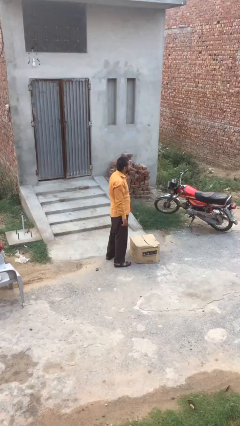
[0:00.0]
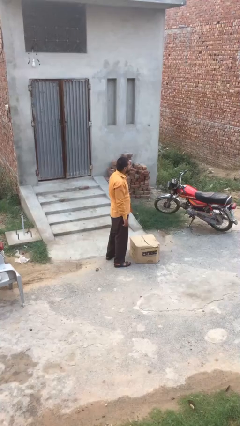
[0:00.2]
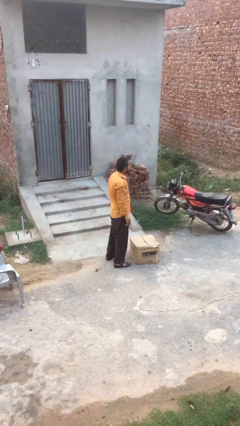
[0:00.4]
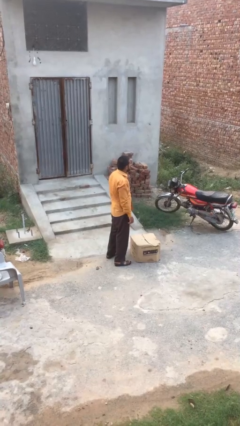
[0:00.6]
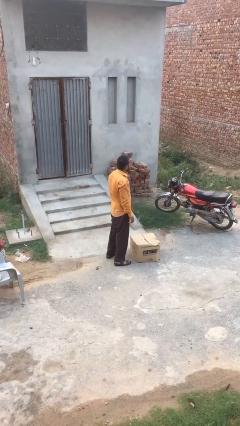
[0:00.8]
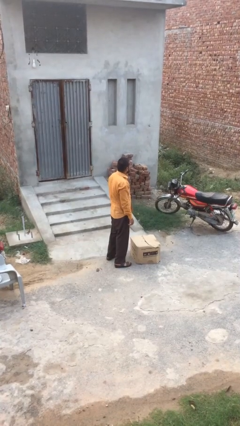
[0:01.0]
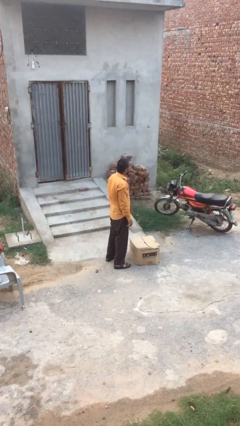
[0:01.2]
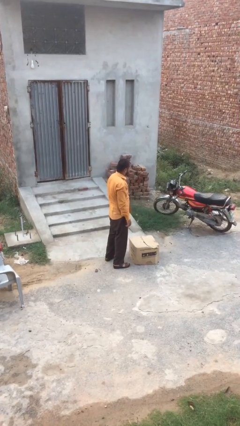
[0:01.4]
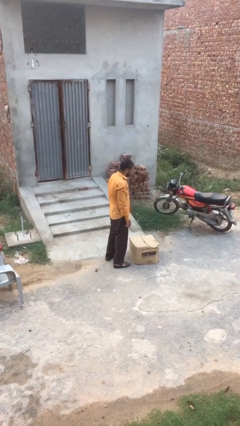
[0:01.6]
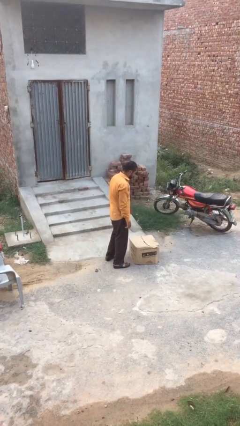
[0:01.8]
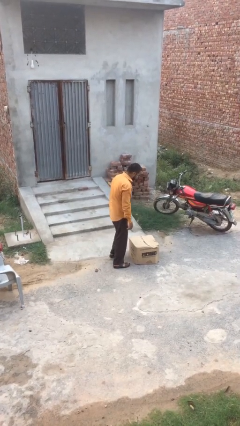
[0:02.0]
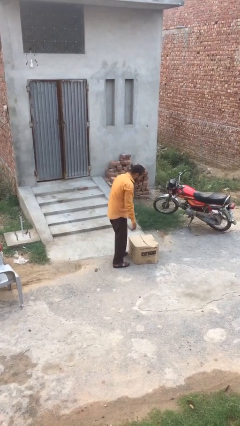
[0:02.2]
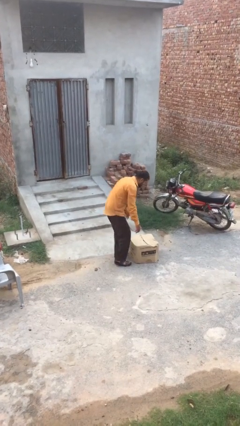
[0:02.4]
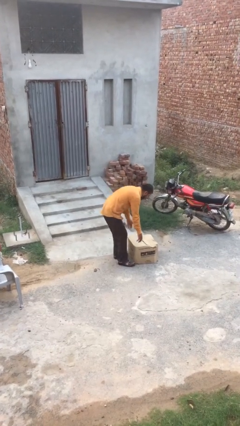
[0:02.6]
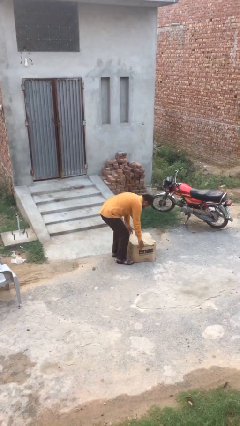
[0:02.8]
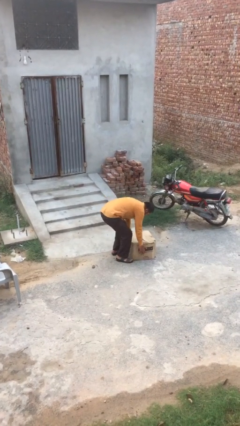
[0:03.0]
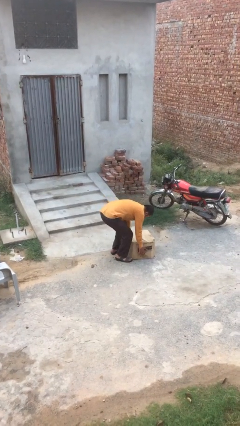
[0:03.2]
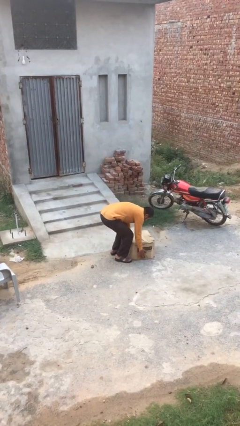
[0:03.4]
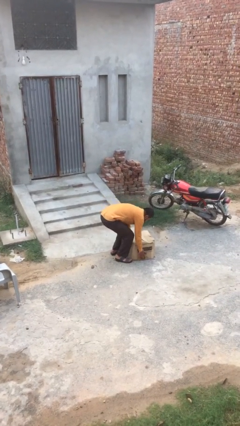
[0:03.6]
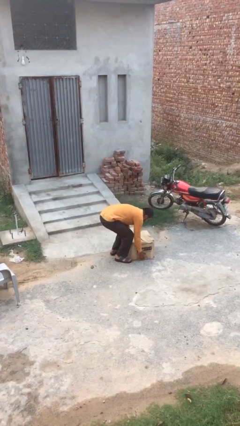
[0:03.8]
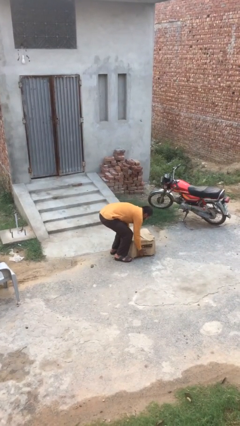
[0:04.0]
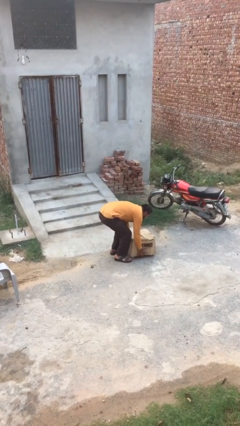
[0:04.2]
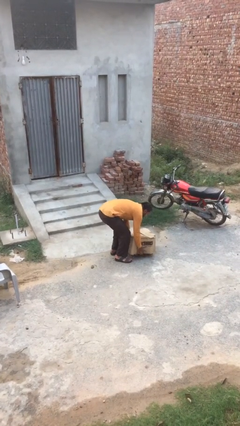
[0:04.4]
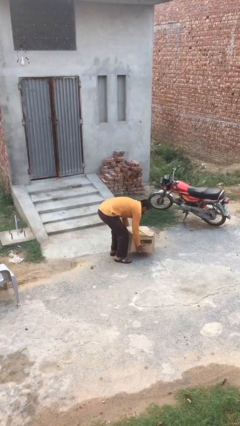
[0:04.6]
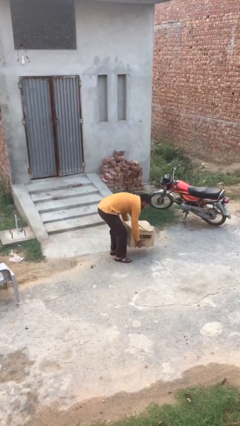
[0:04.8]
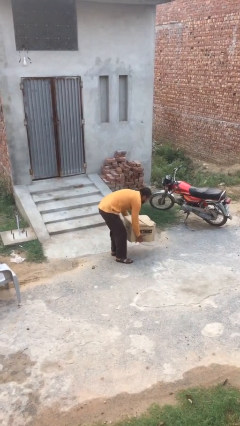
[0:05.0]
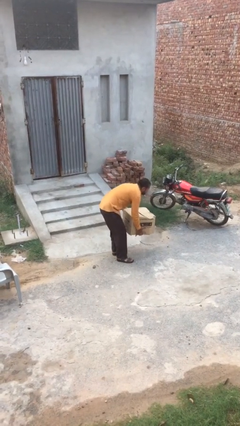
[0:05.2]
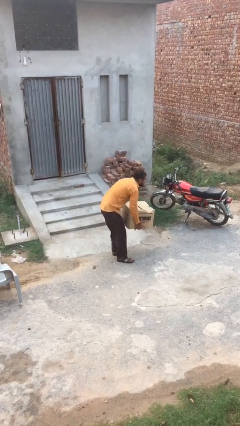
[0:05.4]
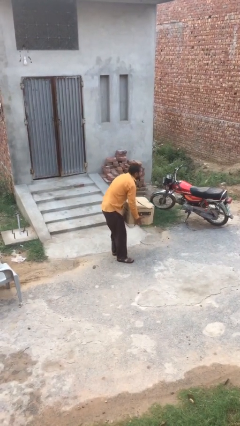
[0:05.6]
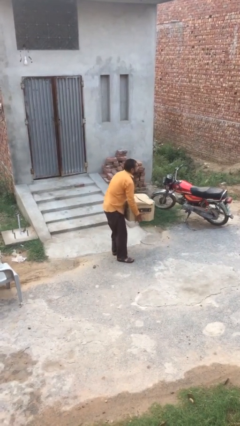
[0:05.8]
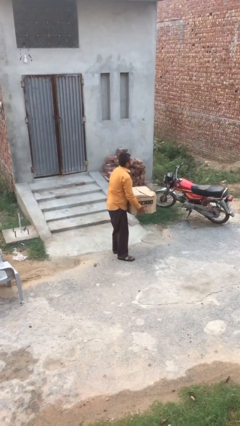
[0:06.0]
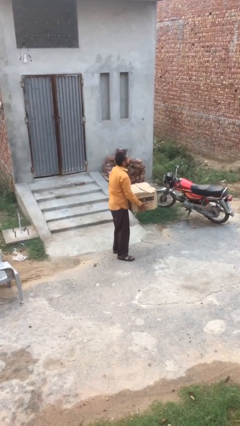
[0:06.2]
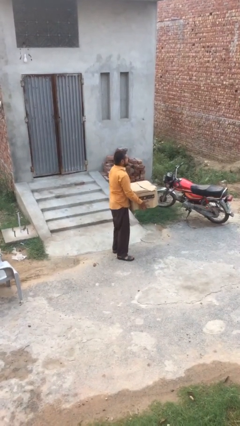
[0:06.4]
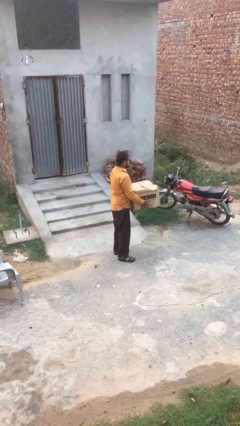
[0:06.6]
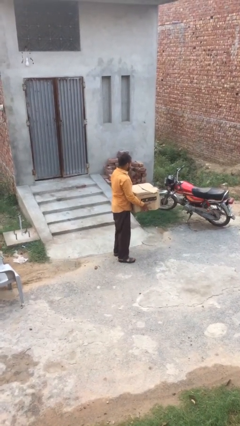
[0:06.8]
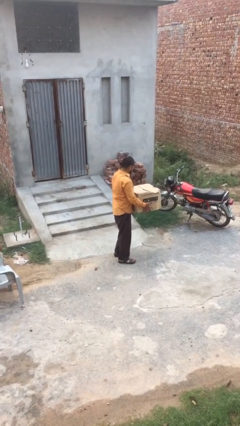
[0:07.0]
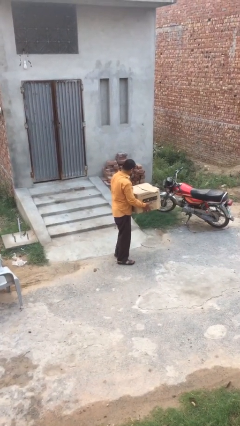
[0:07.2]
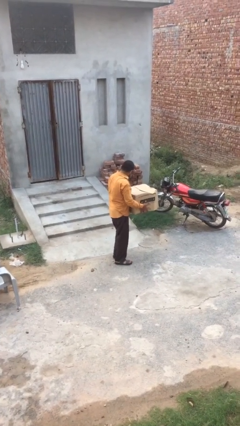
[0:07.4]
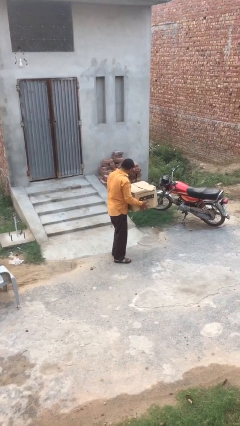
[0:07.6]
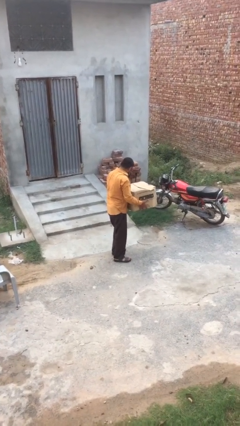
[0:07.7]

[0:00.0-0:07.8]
person picks up object from floor

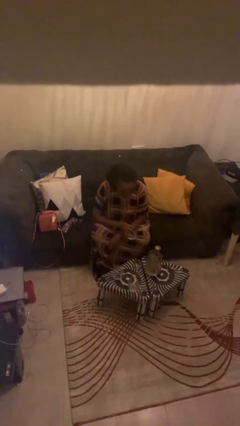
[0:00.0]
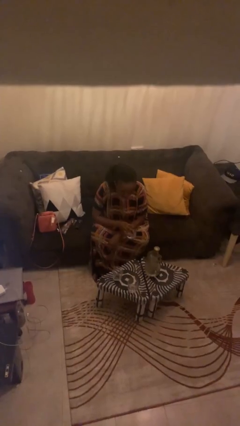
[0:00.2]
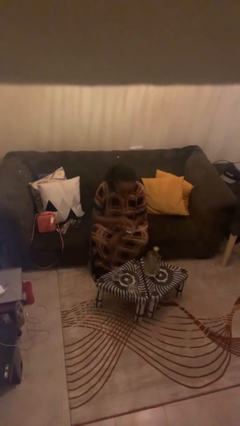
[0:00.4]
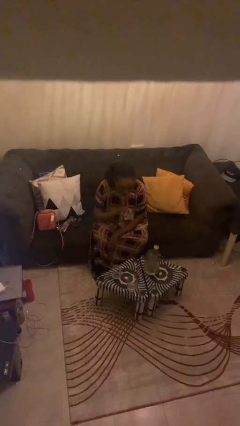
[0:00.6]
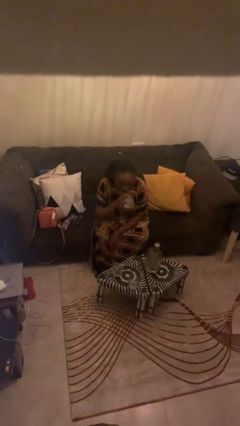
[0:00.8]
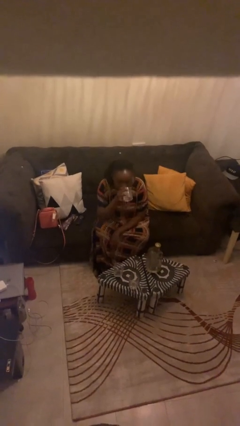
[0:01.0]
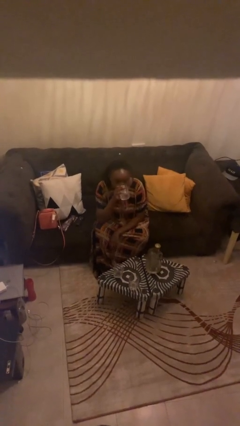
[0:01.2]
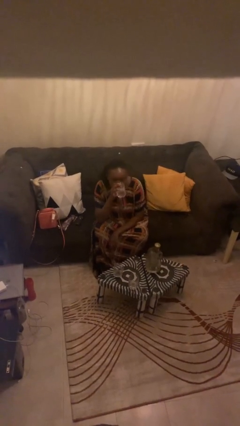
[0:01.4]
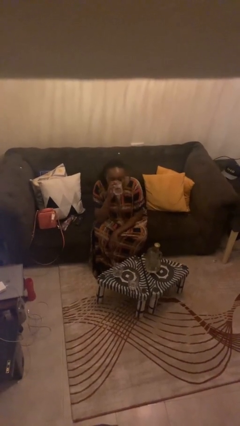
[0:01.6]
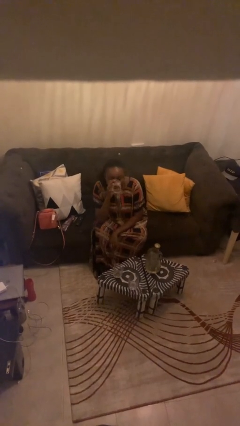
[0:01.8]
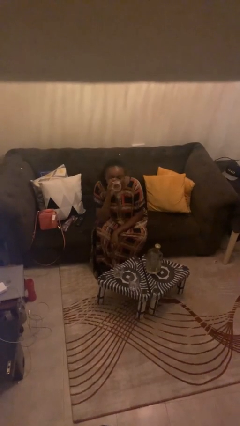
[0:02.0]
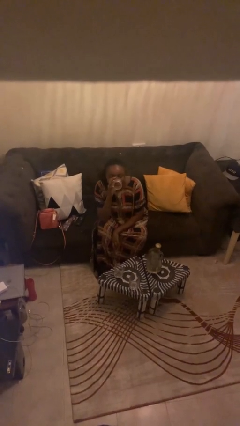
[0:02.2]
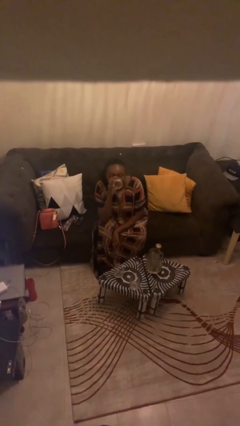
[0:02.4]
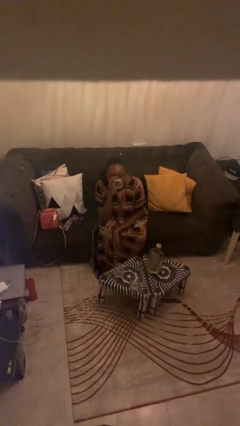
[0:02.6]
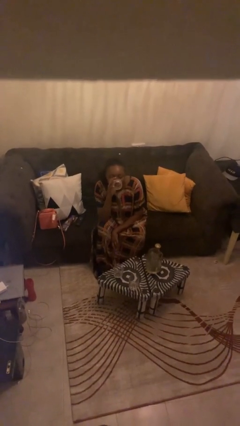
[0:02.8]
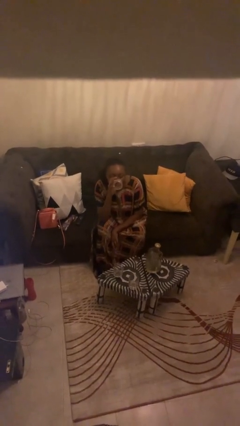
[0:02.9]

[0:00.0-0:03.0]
person drinks from shotglass

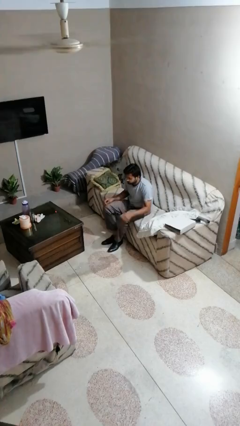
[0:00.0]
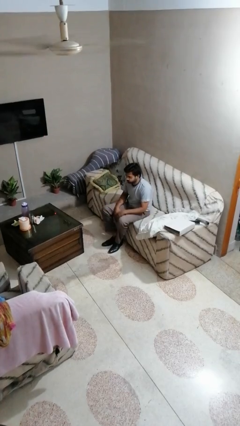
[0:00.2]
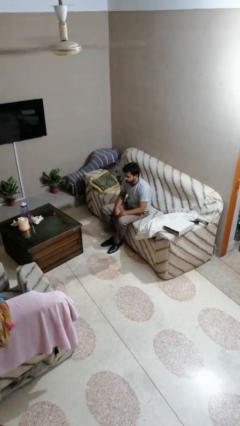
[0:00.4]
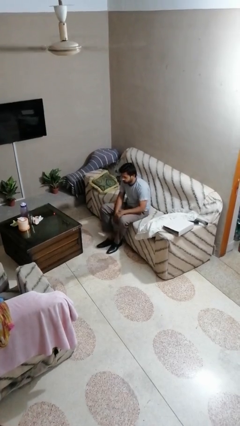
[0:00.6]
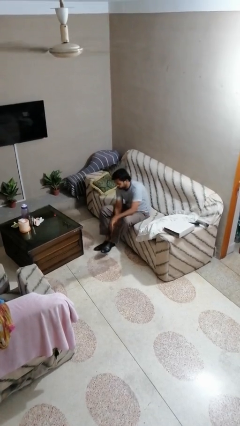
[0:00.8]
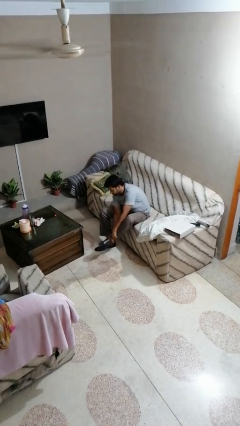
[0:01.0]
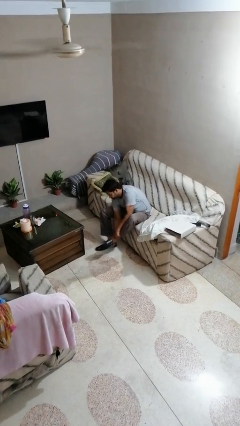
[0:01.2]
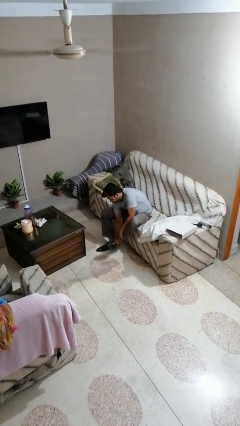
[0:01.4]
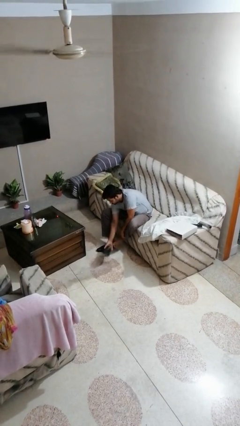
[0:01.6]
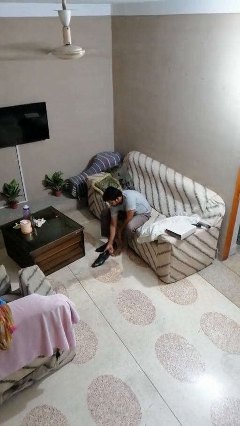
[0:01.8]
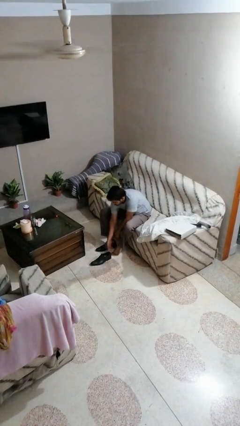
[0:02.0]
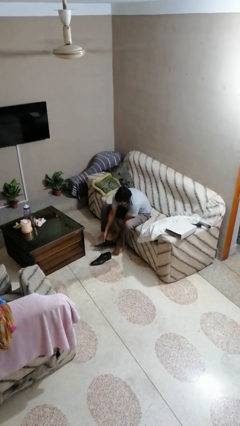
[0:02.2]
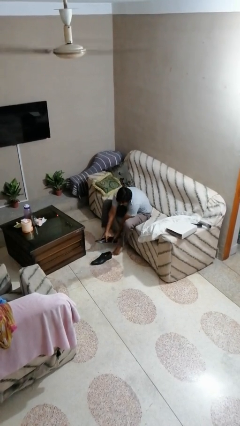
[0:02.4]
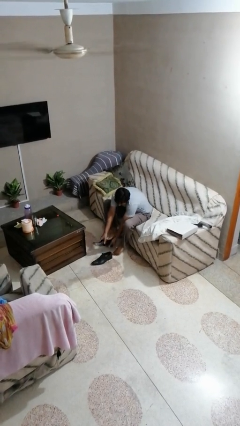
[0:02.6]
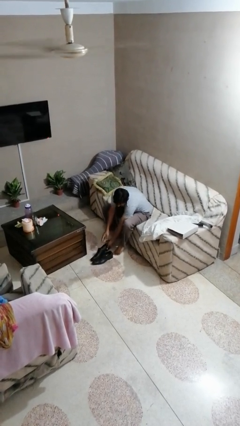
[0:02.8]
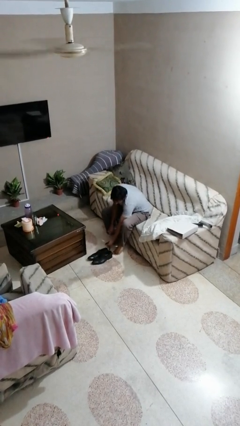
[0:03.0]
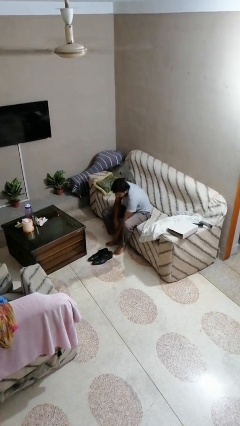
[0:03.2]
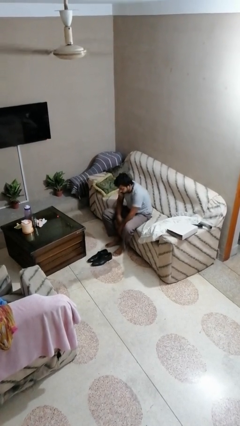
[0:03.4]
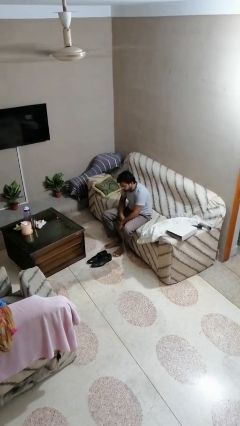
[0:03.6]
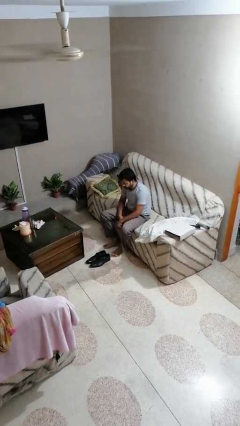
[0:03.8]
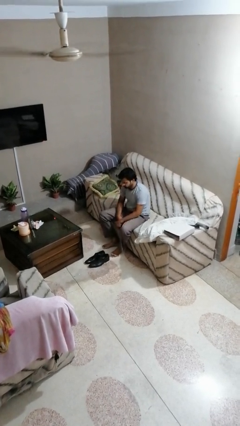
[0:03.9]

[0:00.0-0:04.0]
person takes off shoes

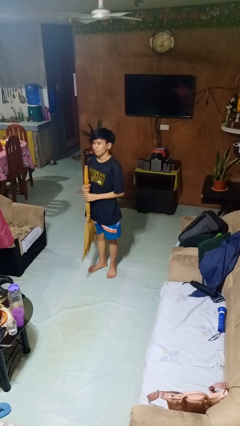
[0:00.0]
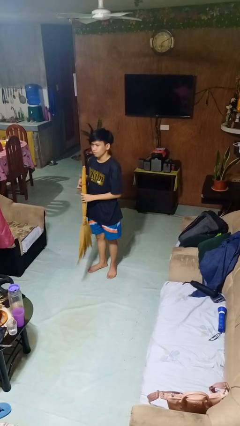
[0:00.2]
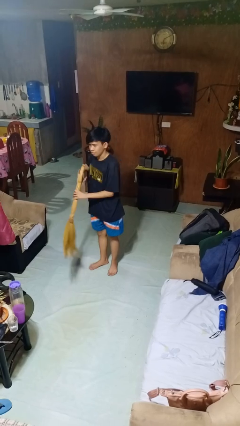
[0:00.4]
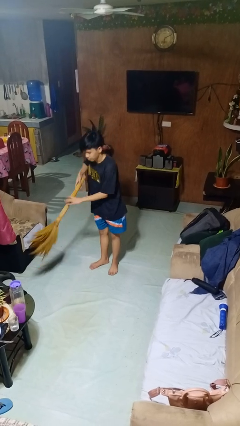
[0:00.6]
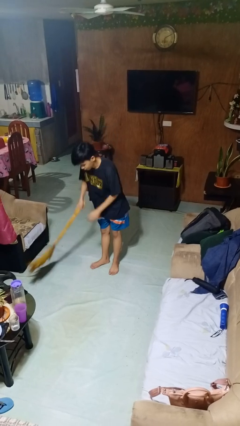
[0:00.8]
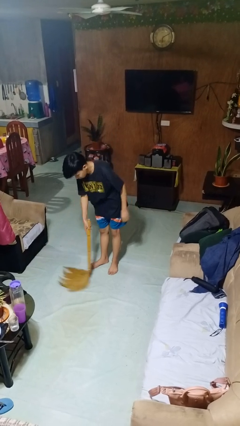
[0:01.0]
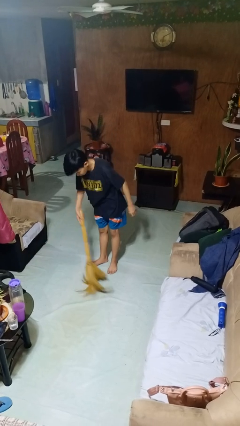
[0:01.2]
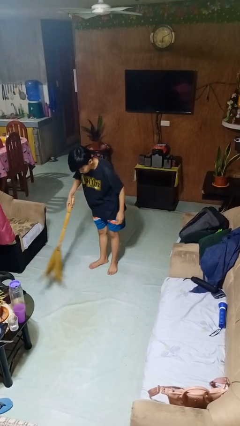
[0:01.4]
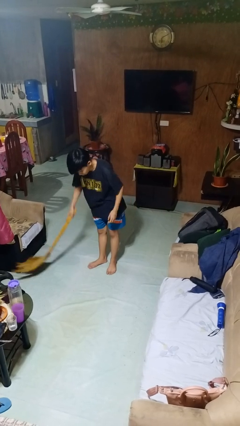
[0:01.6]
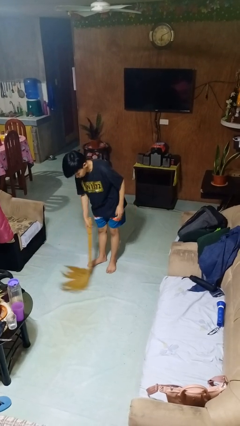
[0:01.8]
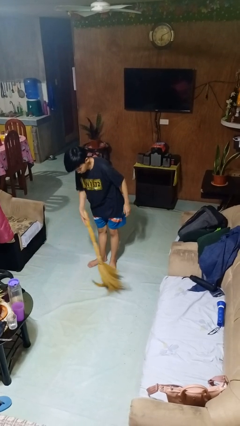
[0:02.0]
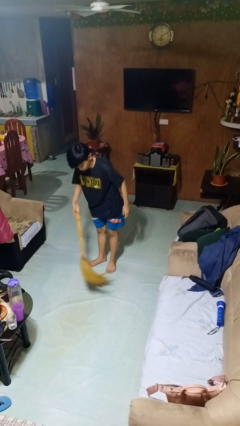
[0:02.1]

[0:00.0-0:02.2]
person sweeps floor

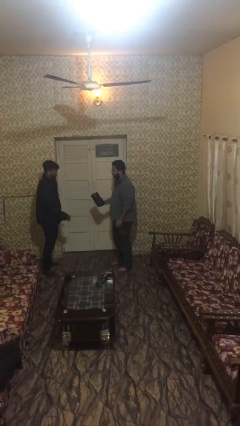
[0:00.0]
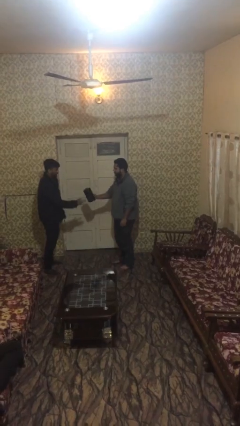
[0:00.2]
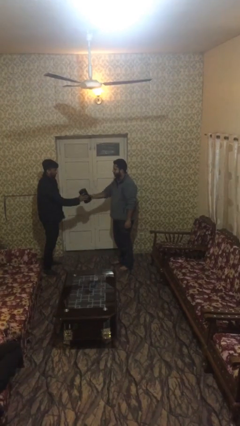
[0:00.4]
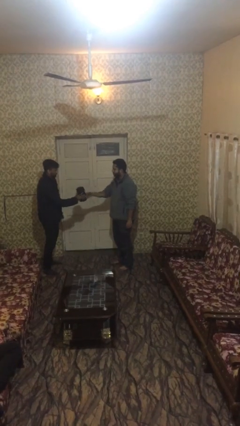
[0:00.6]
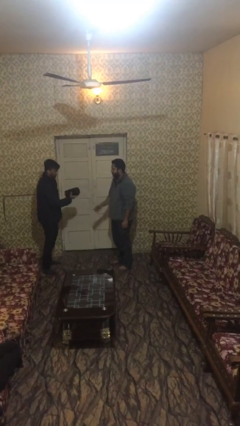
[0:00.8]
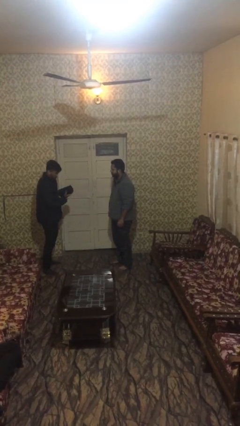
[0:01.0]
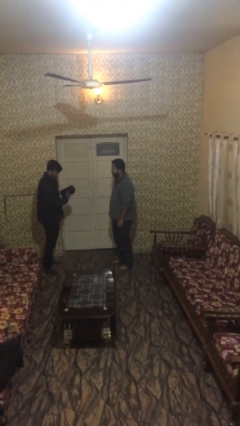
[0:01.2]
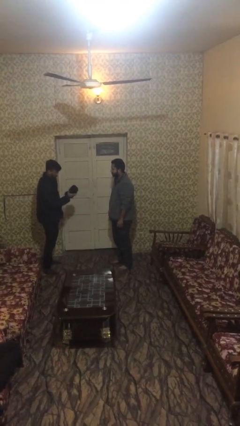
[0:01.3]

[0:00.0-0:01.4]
person transfers object to person
